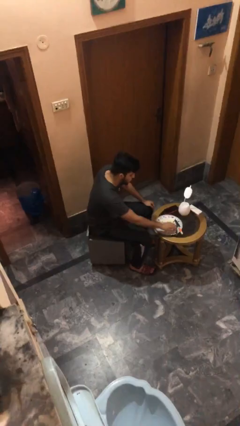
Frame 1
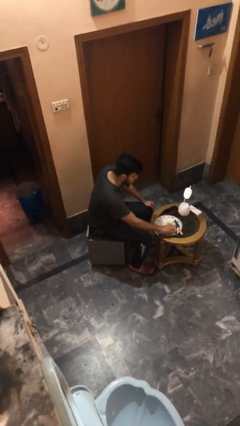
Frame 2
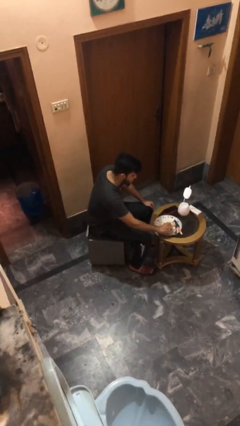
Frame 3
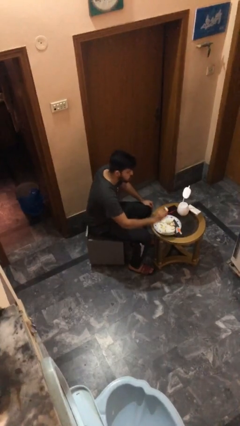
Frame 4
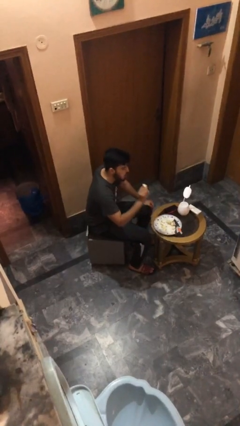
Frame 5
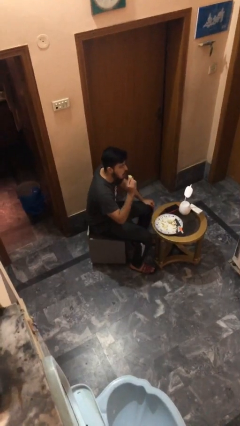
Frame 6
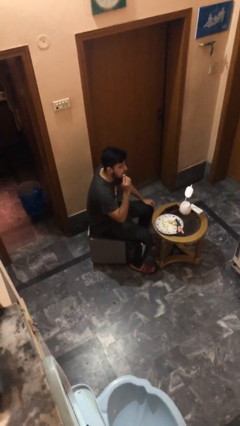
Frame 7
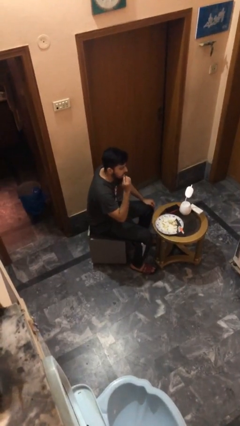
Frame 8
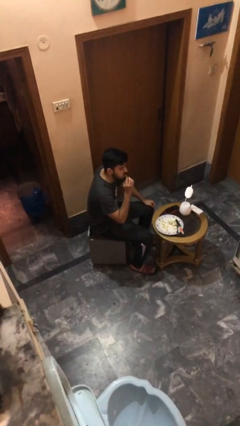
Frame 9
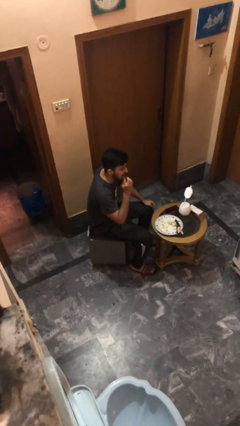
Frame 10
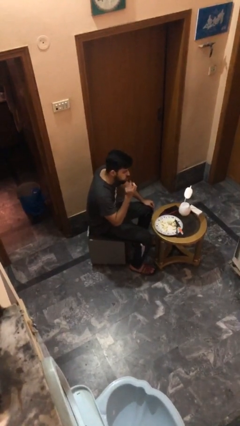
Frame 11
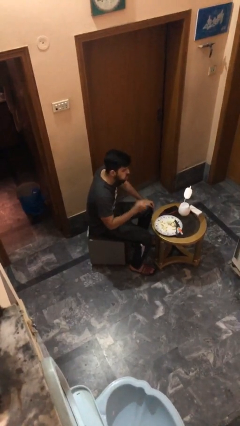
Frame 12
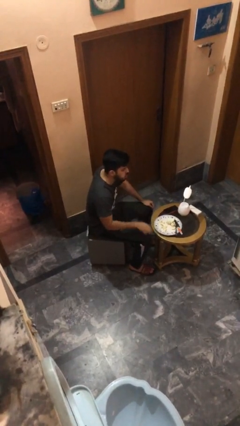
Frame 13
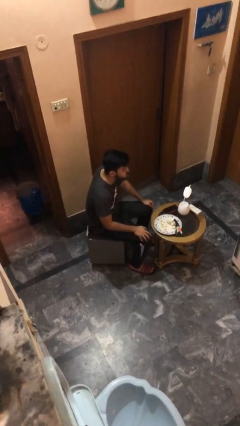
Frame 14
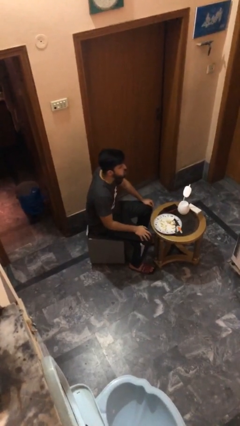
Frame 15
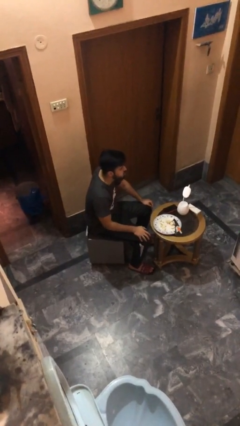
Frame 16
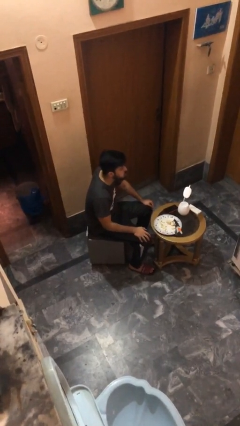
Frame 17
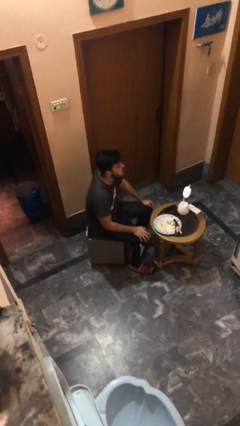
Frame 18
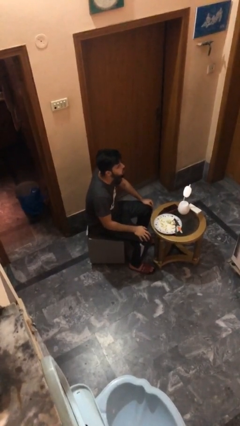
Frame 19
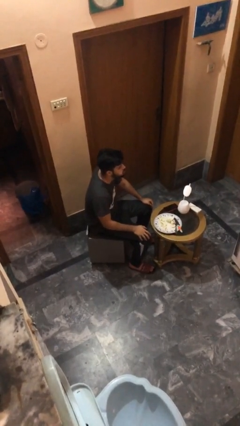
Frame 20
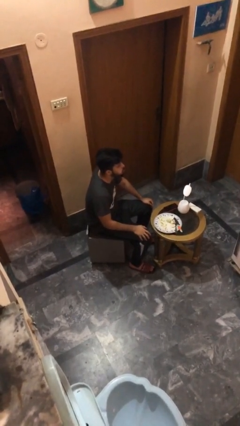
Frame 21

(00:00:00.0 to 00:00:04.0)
person eats with hands

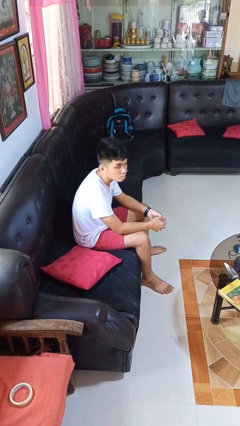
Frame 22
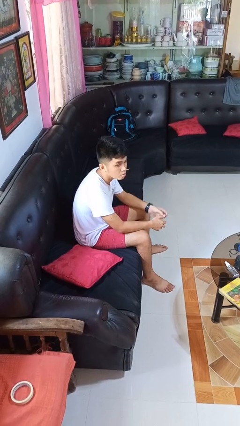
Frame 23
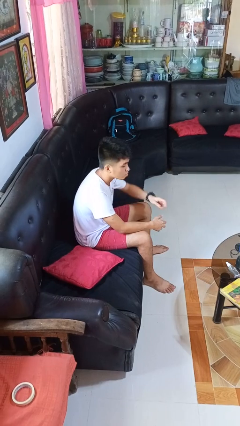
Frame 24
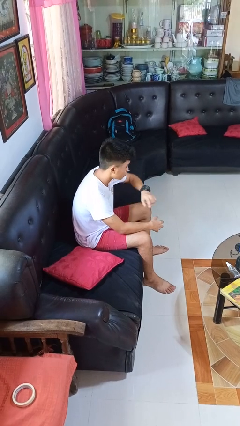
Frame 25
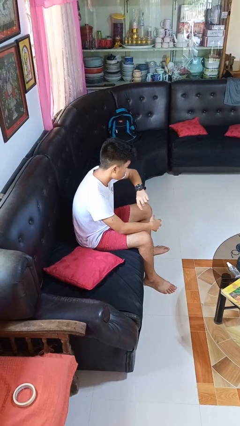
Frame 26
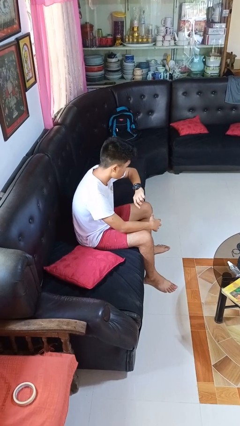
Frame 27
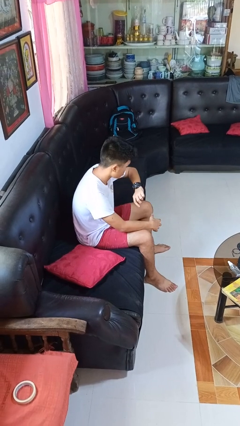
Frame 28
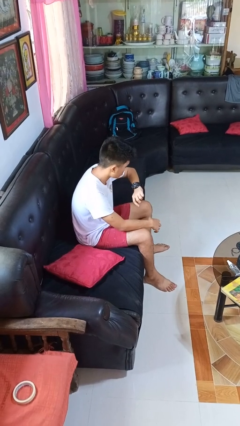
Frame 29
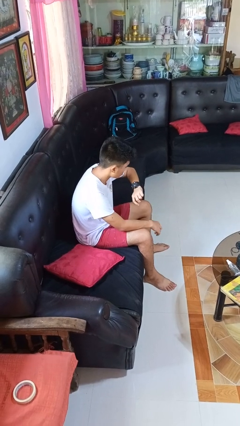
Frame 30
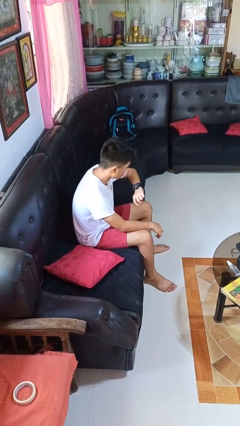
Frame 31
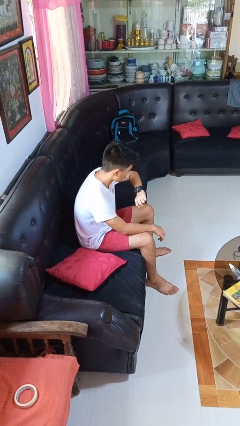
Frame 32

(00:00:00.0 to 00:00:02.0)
person looks at wristwatch

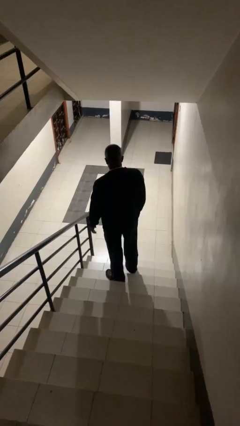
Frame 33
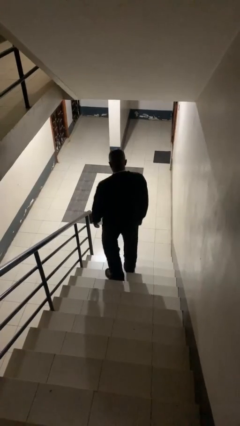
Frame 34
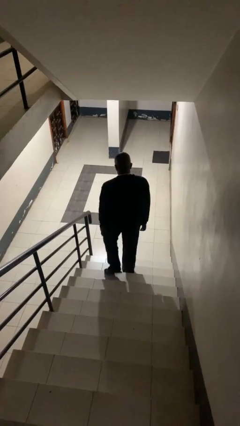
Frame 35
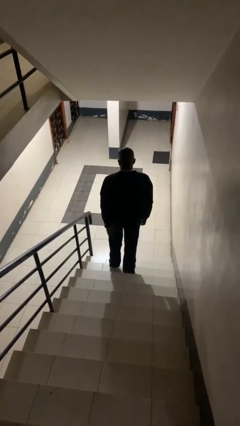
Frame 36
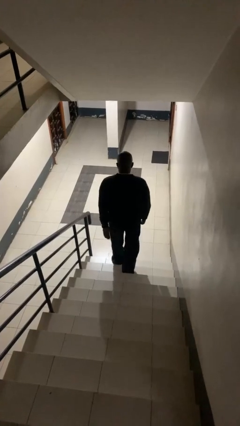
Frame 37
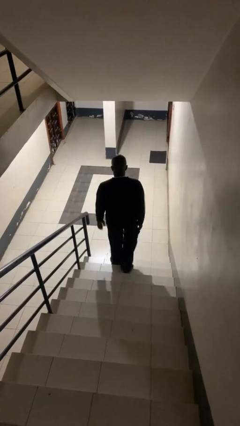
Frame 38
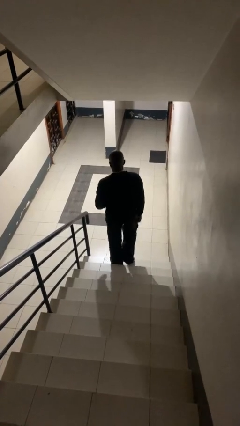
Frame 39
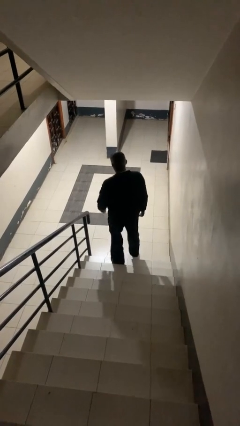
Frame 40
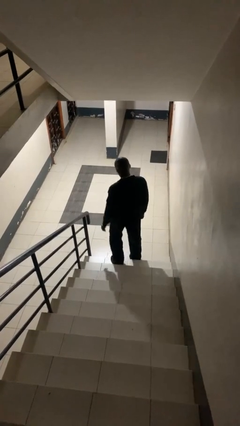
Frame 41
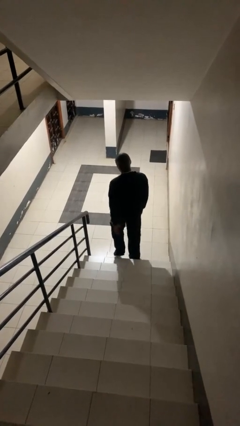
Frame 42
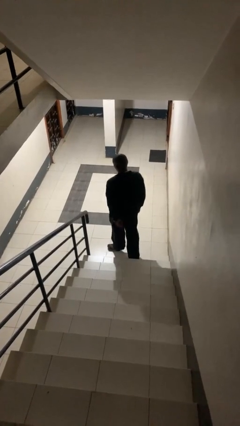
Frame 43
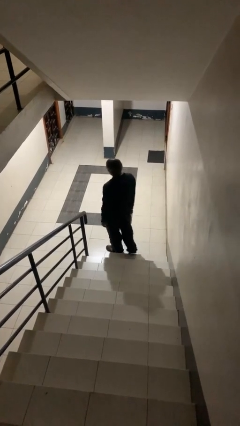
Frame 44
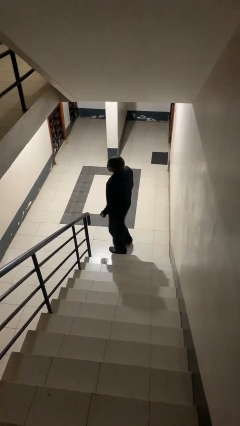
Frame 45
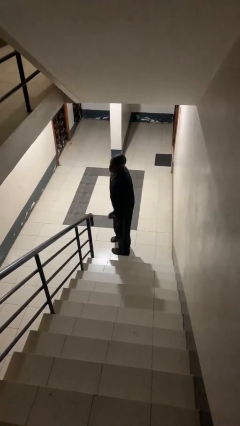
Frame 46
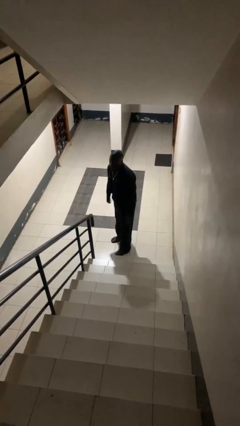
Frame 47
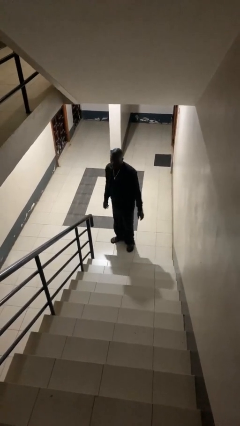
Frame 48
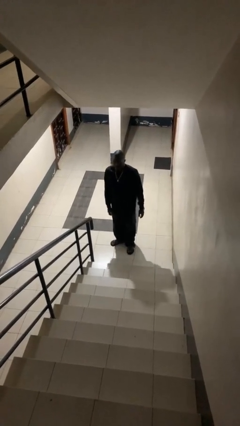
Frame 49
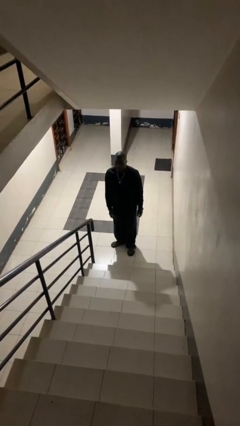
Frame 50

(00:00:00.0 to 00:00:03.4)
person climbs down stairs

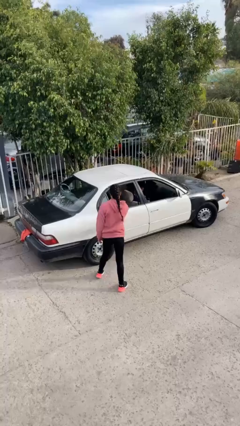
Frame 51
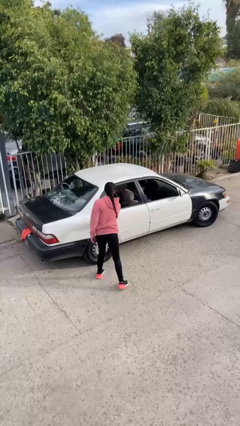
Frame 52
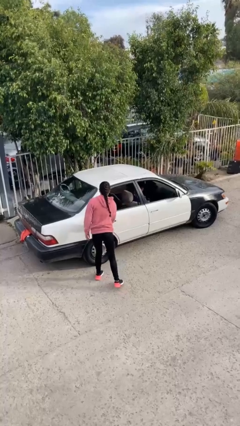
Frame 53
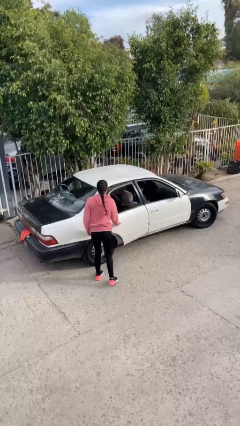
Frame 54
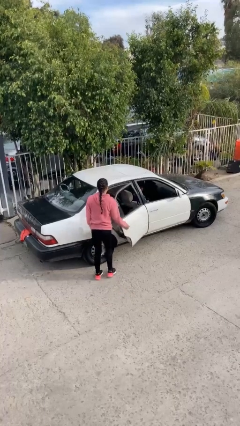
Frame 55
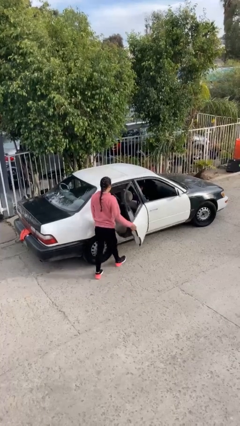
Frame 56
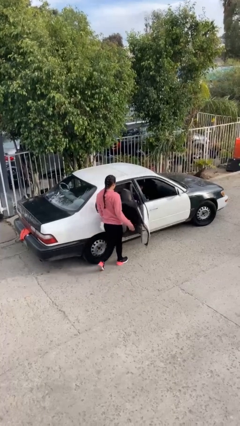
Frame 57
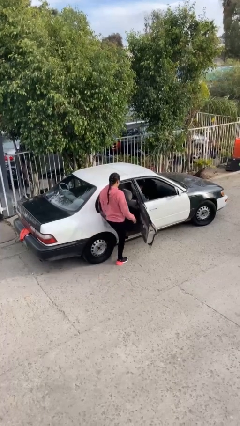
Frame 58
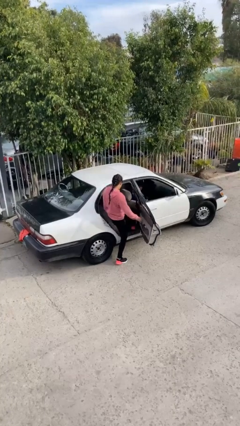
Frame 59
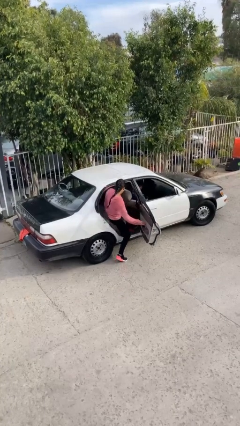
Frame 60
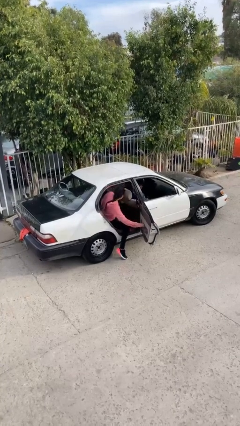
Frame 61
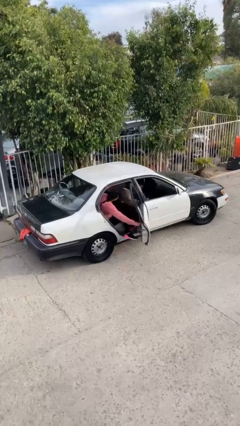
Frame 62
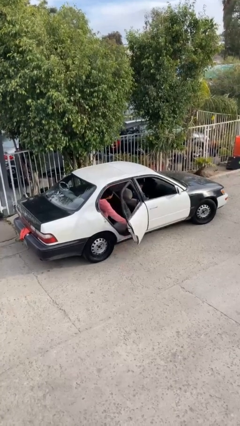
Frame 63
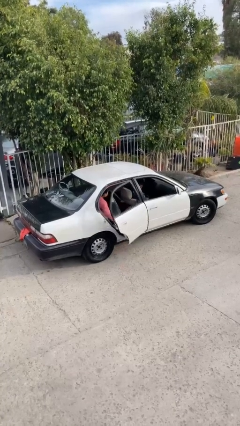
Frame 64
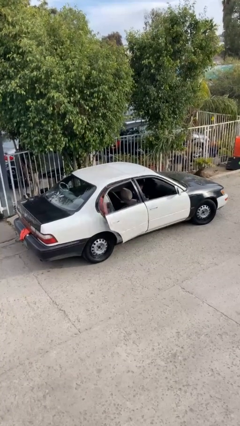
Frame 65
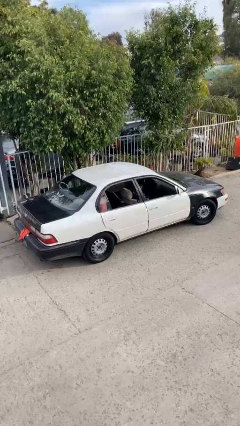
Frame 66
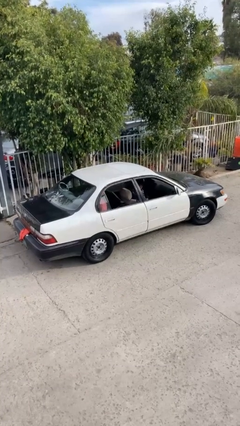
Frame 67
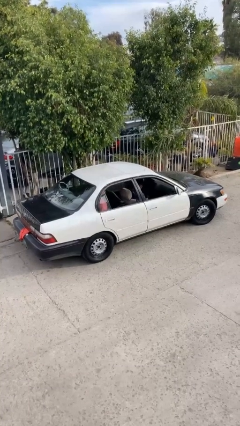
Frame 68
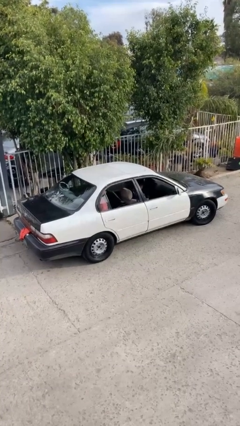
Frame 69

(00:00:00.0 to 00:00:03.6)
car picks up person

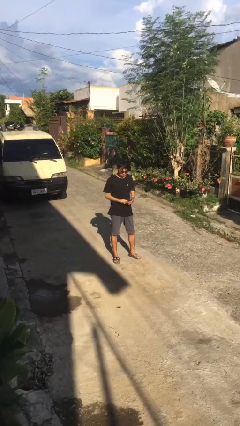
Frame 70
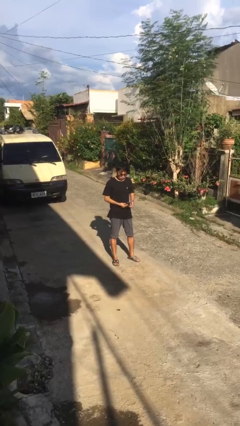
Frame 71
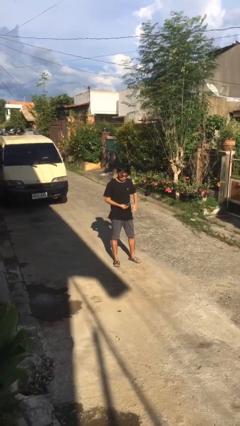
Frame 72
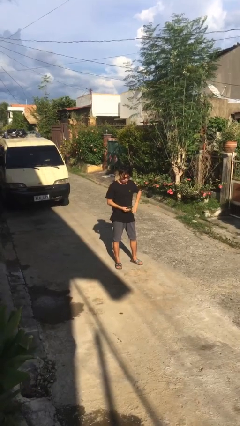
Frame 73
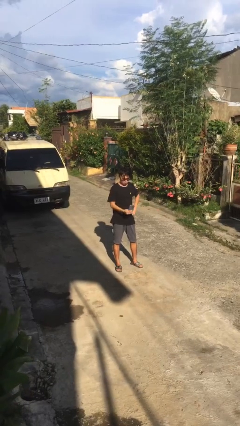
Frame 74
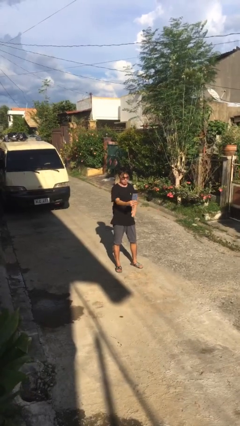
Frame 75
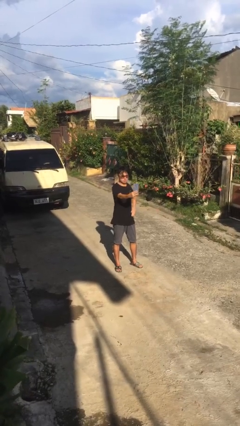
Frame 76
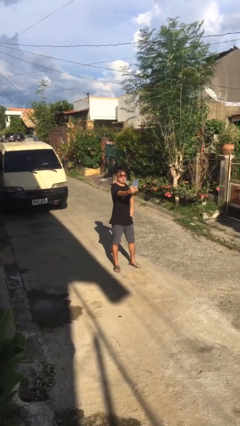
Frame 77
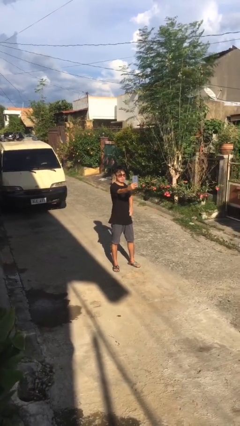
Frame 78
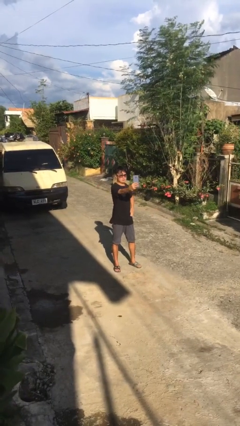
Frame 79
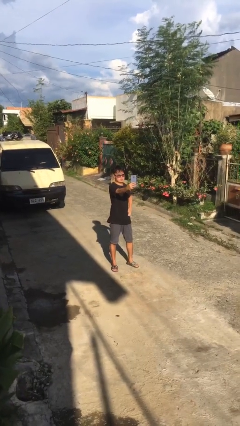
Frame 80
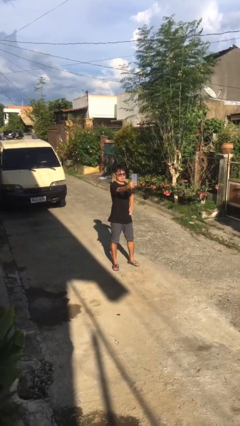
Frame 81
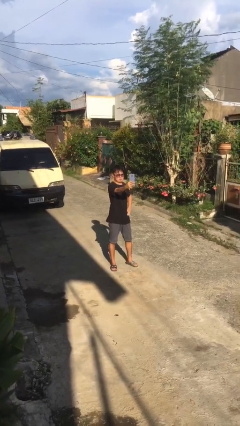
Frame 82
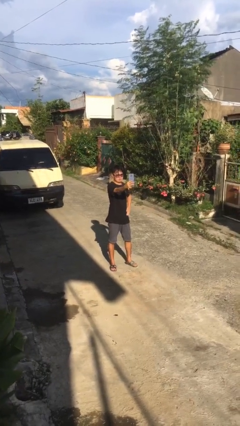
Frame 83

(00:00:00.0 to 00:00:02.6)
person takes selfie

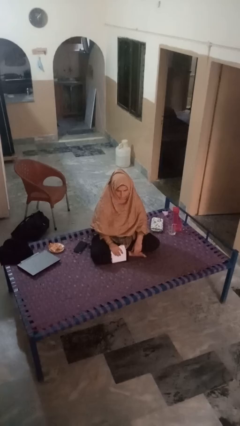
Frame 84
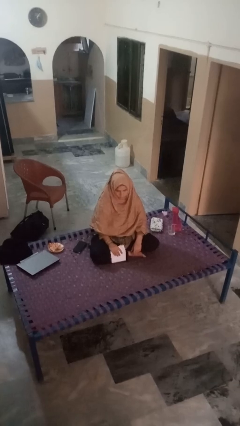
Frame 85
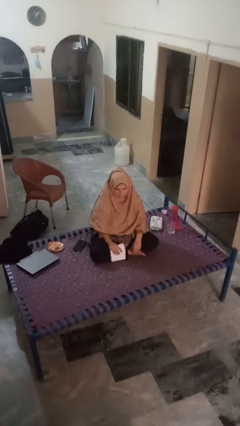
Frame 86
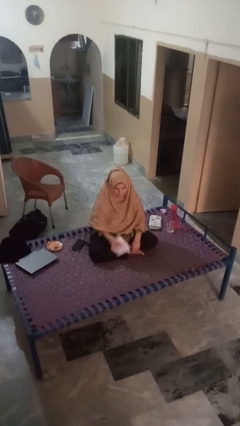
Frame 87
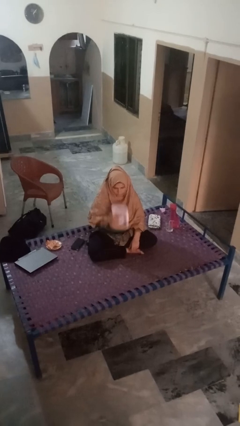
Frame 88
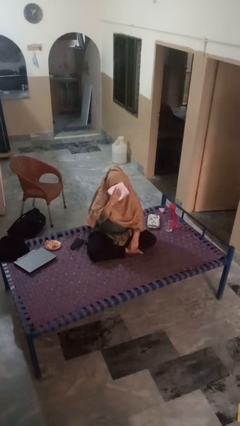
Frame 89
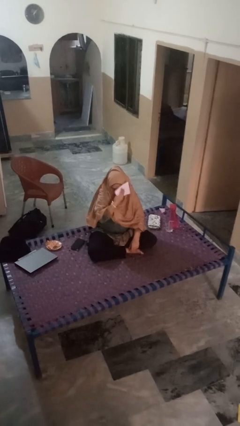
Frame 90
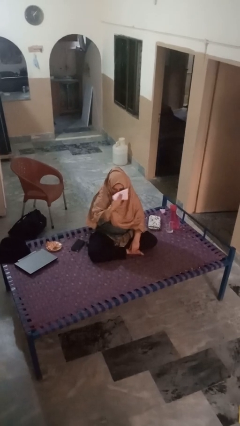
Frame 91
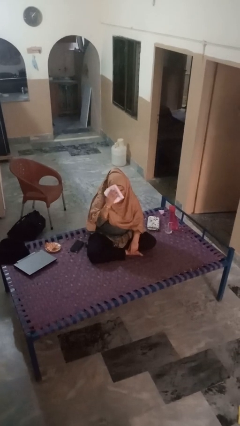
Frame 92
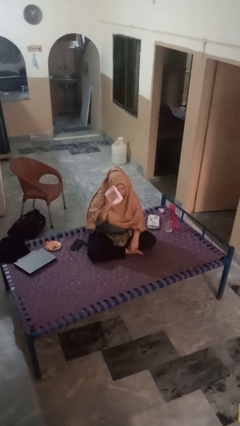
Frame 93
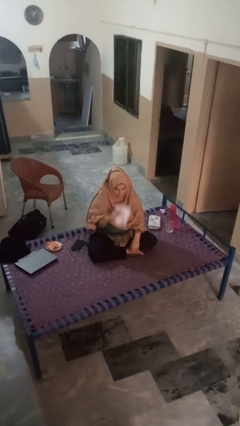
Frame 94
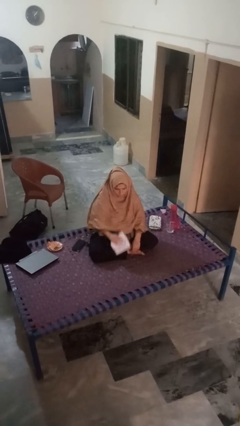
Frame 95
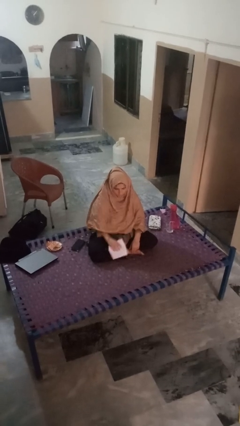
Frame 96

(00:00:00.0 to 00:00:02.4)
person wipes mouth with napkin
